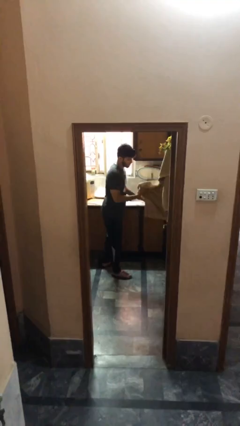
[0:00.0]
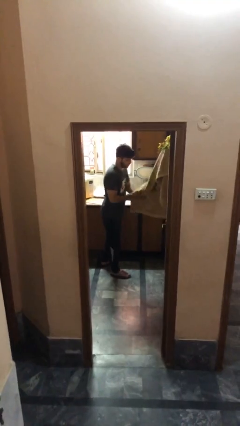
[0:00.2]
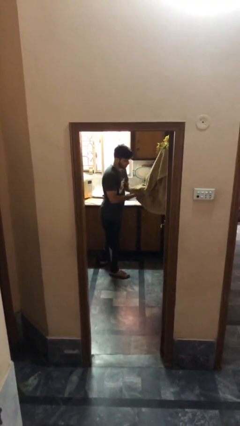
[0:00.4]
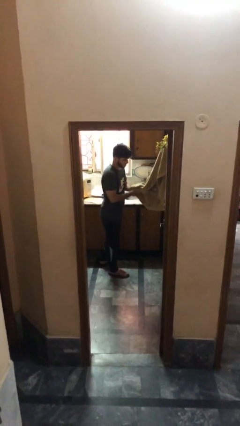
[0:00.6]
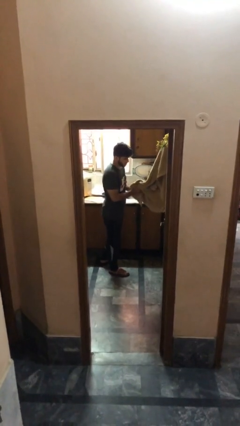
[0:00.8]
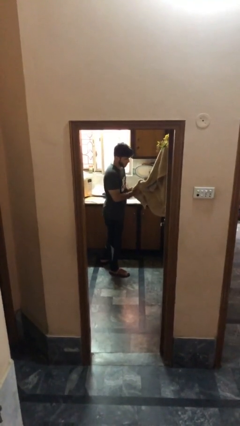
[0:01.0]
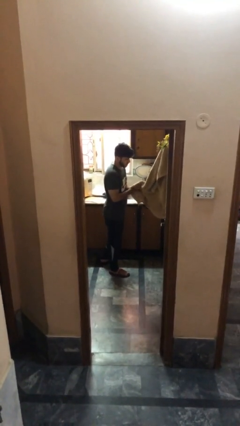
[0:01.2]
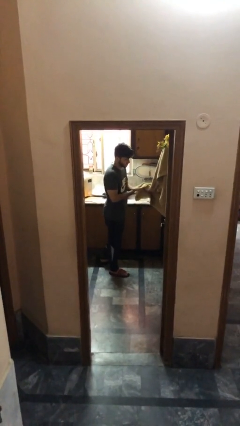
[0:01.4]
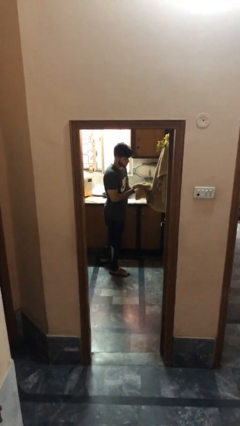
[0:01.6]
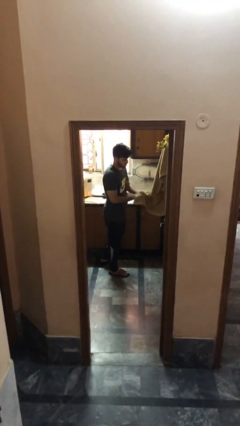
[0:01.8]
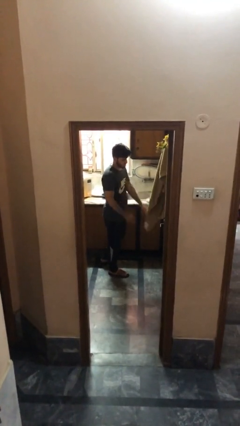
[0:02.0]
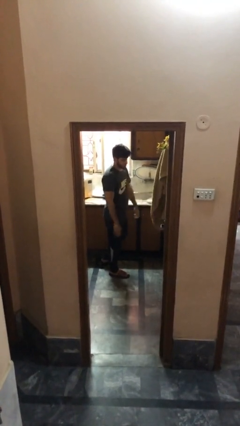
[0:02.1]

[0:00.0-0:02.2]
person dries hands with towel

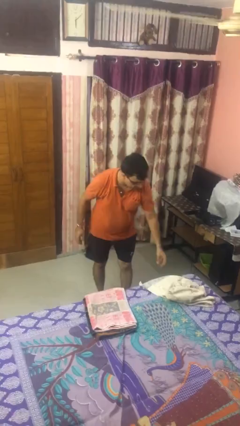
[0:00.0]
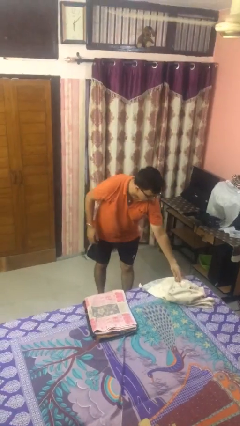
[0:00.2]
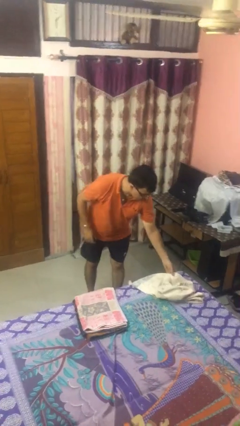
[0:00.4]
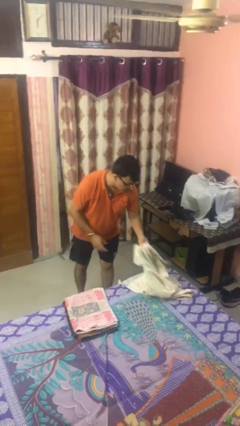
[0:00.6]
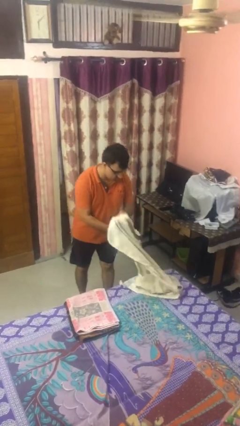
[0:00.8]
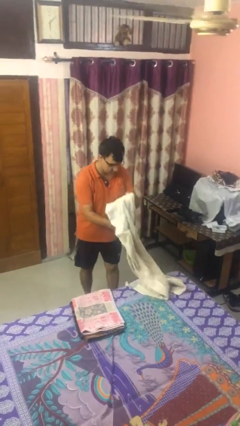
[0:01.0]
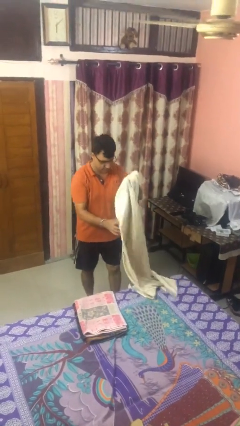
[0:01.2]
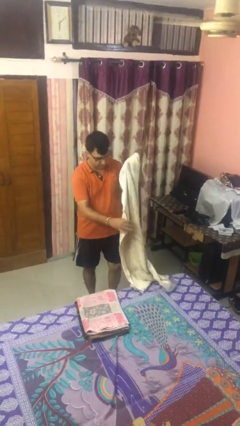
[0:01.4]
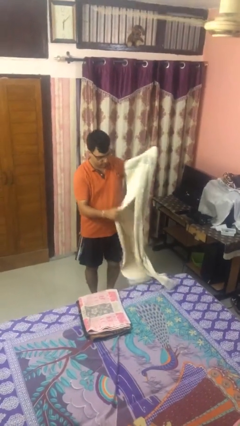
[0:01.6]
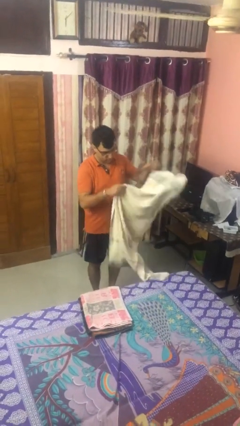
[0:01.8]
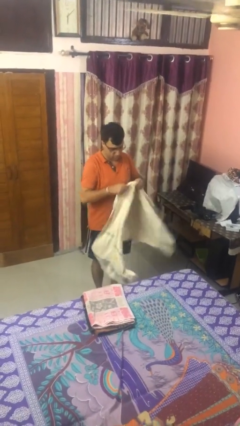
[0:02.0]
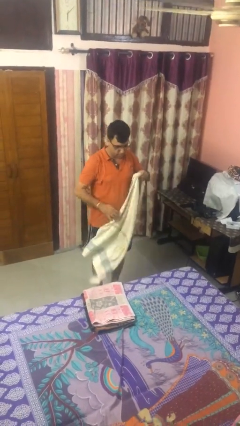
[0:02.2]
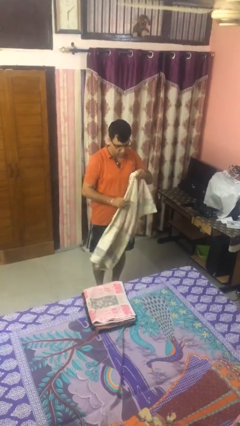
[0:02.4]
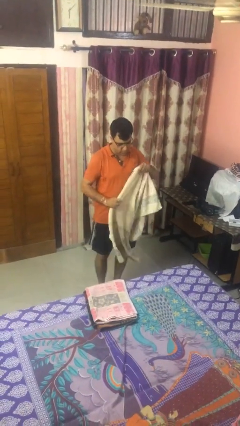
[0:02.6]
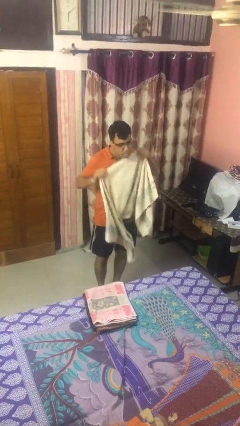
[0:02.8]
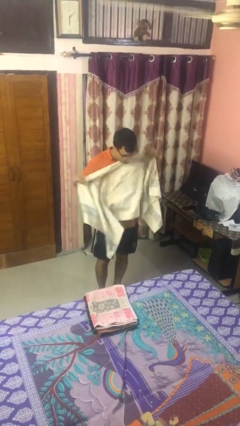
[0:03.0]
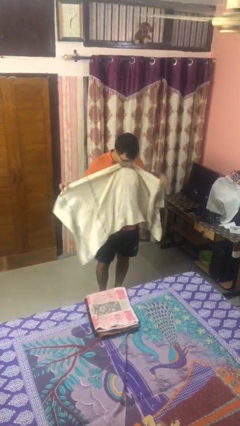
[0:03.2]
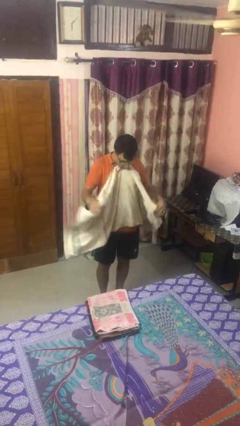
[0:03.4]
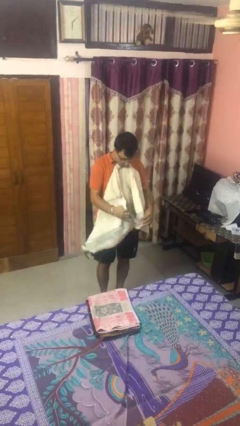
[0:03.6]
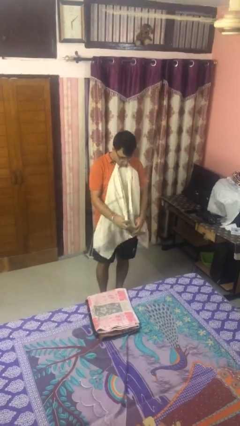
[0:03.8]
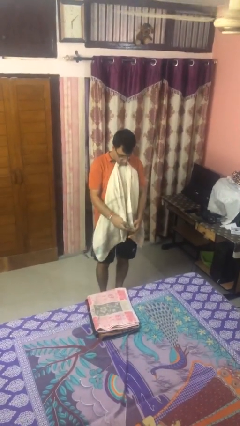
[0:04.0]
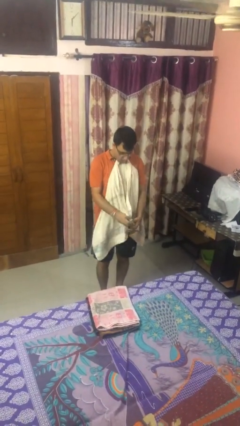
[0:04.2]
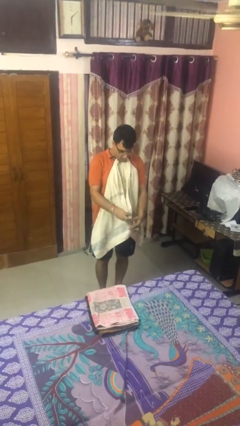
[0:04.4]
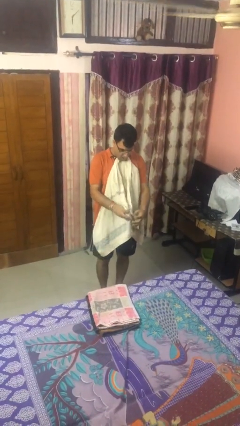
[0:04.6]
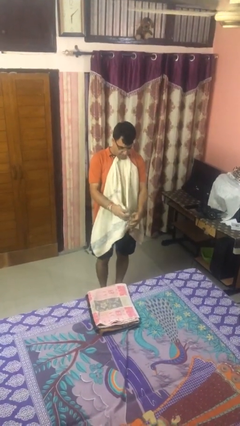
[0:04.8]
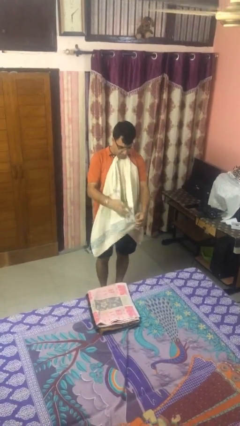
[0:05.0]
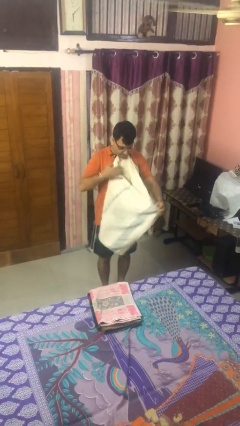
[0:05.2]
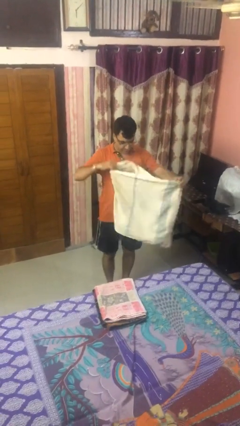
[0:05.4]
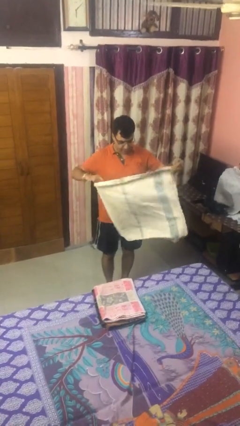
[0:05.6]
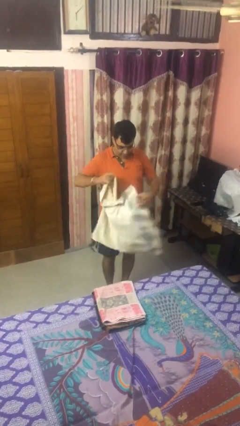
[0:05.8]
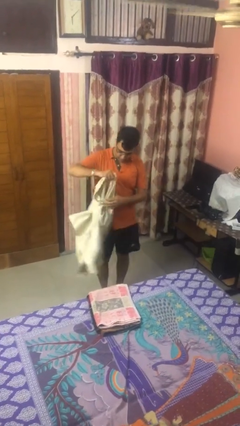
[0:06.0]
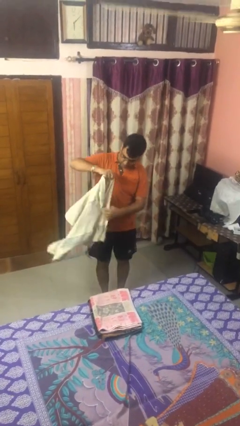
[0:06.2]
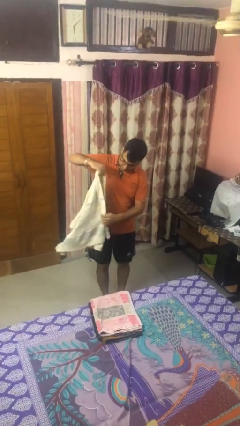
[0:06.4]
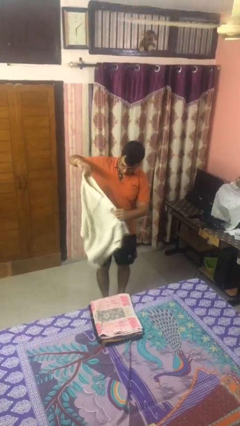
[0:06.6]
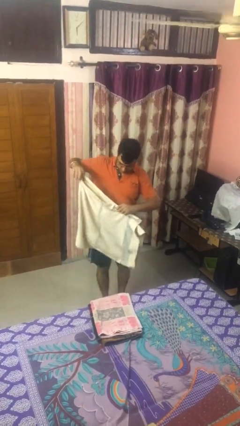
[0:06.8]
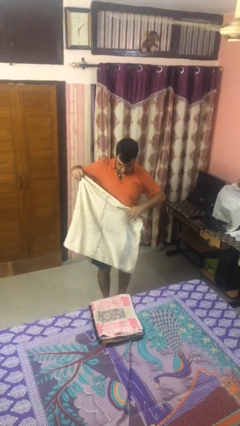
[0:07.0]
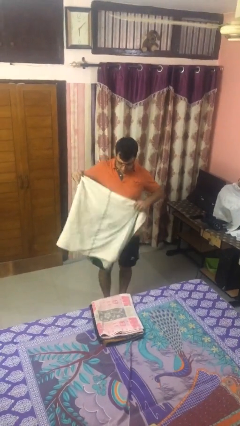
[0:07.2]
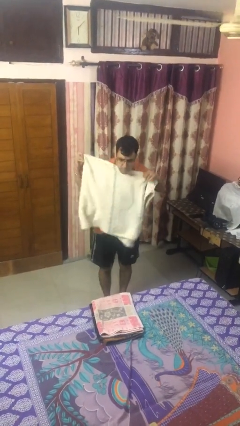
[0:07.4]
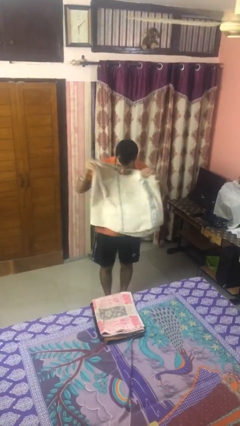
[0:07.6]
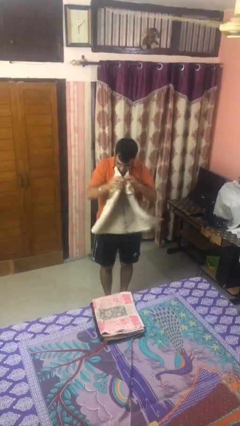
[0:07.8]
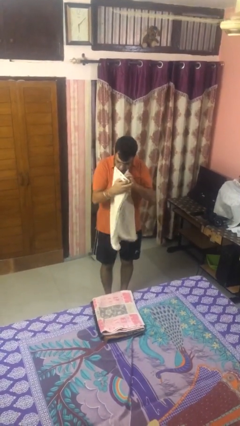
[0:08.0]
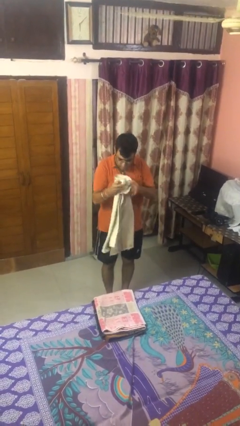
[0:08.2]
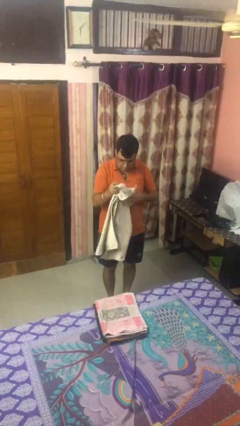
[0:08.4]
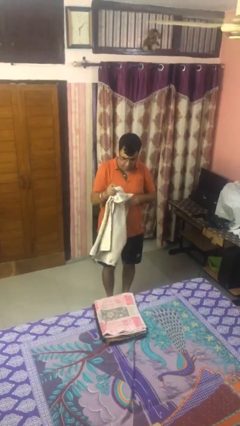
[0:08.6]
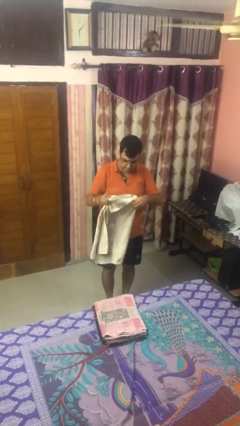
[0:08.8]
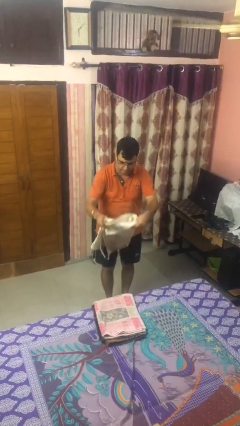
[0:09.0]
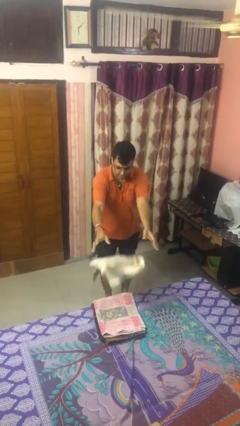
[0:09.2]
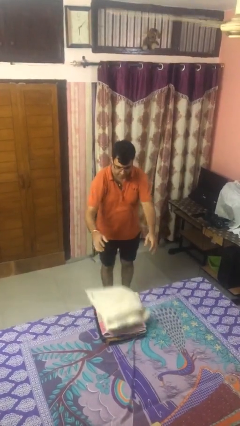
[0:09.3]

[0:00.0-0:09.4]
person folds towel

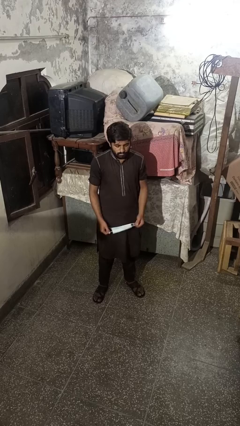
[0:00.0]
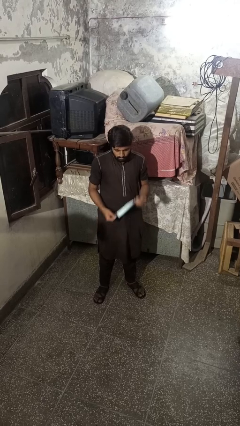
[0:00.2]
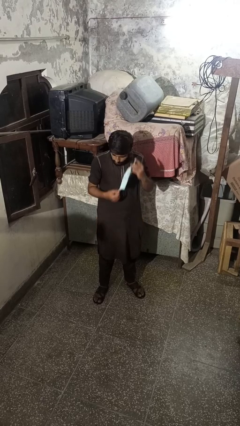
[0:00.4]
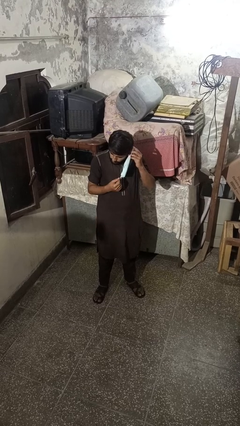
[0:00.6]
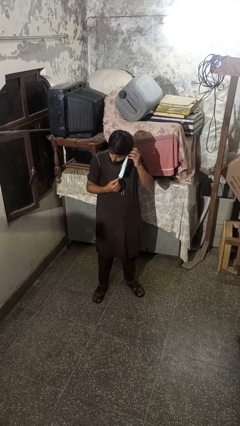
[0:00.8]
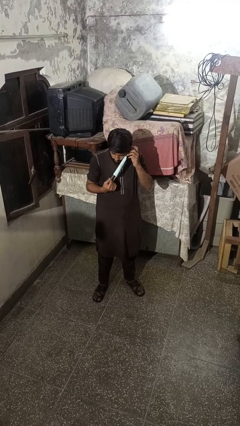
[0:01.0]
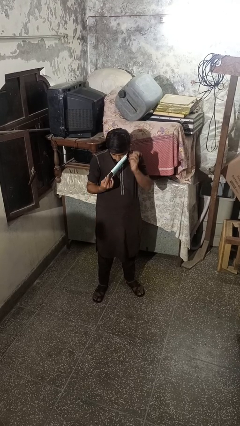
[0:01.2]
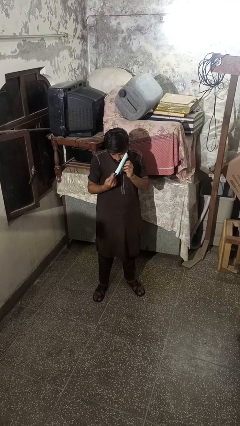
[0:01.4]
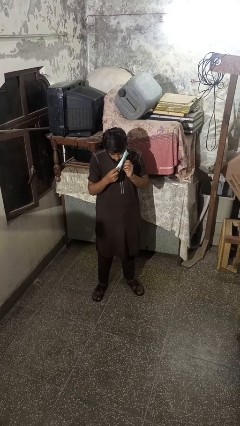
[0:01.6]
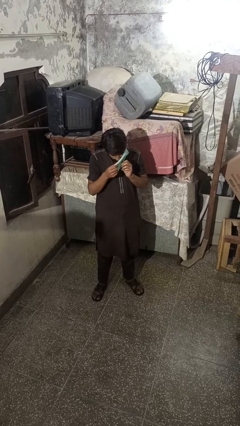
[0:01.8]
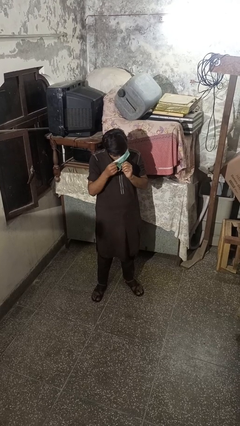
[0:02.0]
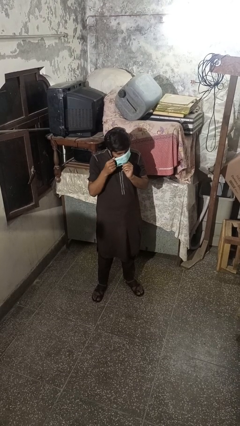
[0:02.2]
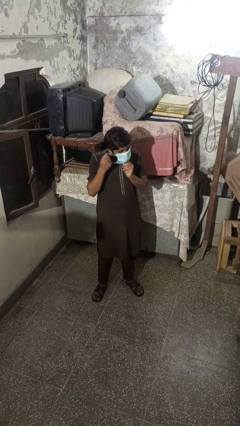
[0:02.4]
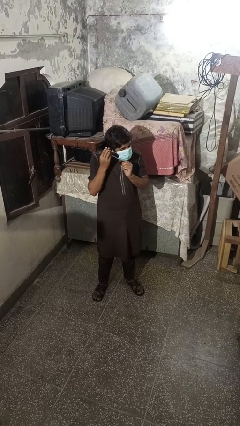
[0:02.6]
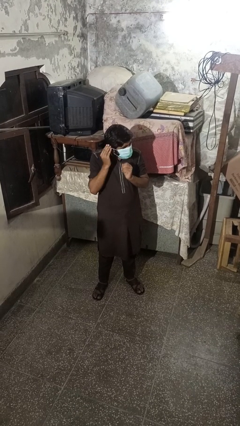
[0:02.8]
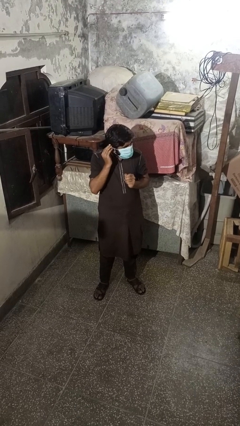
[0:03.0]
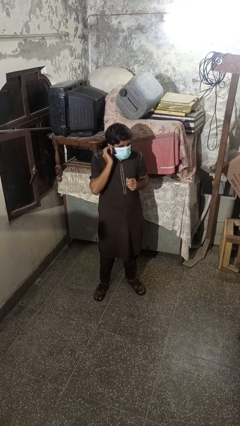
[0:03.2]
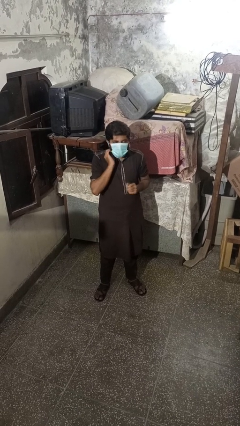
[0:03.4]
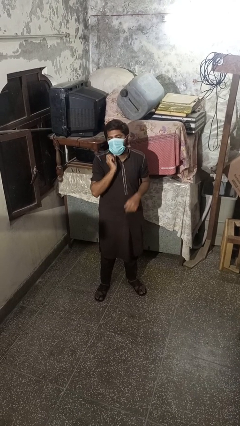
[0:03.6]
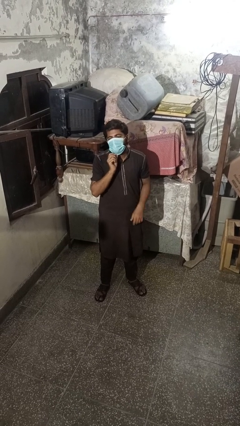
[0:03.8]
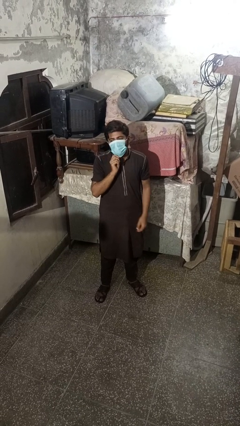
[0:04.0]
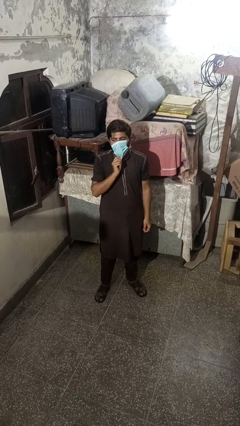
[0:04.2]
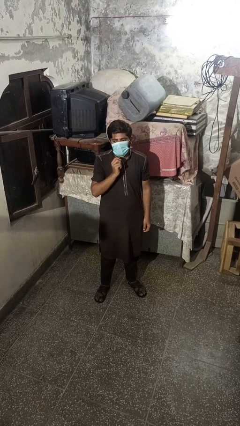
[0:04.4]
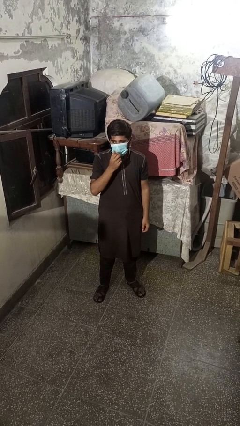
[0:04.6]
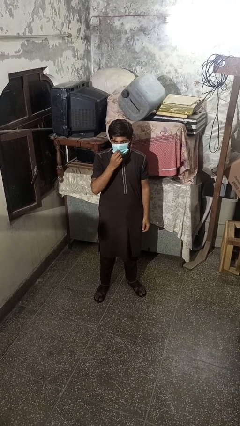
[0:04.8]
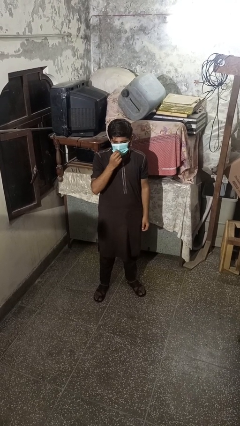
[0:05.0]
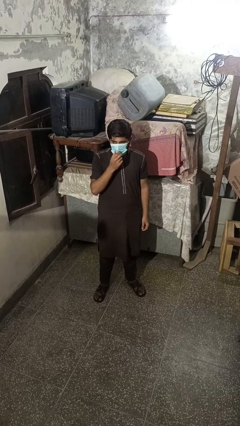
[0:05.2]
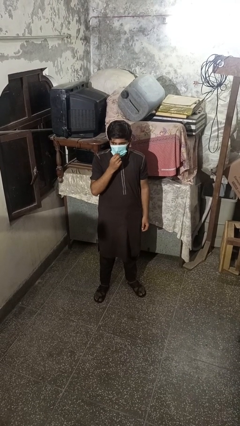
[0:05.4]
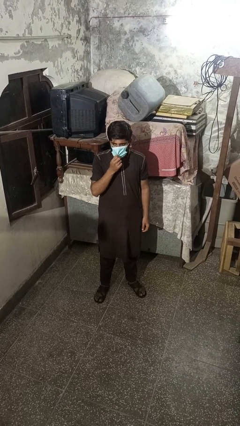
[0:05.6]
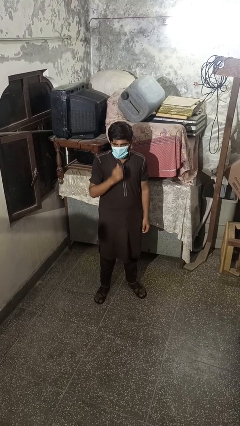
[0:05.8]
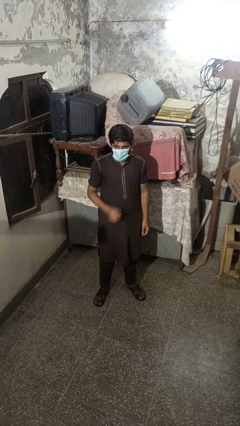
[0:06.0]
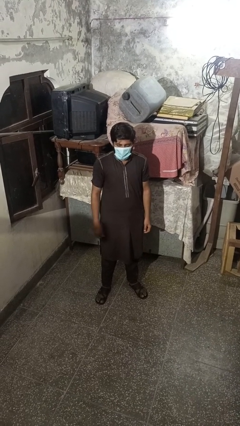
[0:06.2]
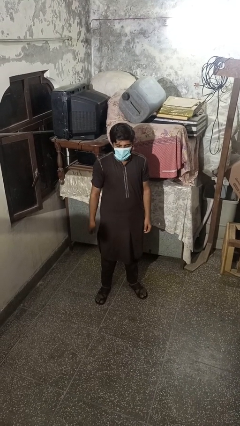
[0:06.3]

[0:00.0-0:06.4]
person puts on facemask

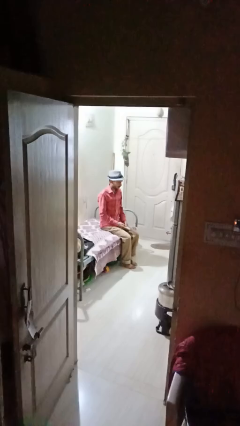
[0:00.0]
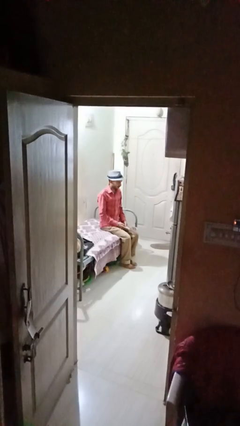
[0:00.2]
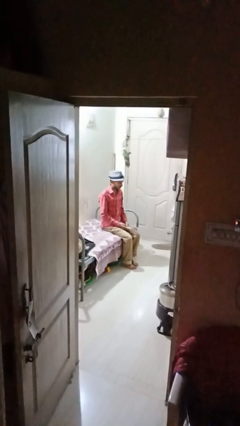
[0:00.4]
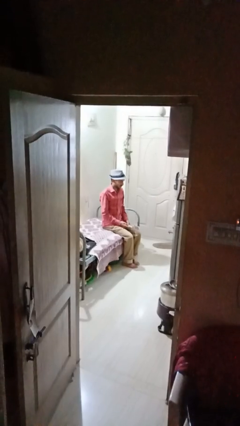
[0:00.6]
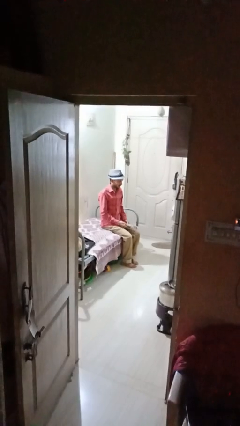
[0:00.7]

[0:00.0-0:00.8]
person uses television remote
